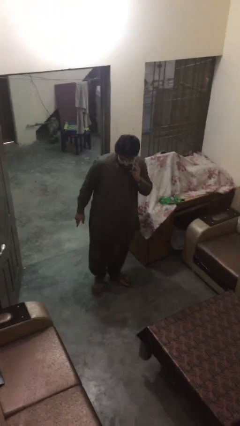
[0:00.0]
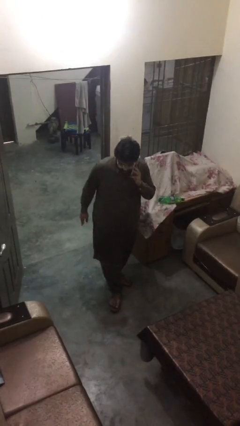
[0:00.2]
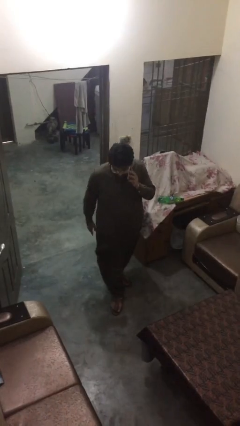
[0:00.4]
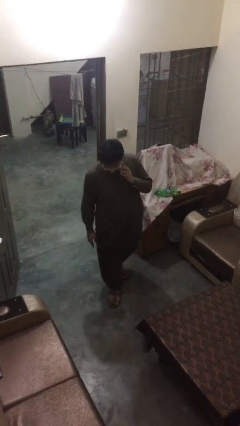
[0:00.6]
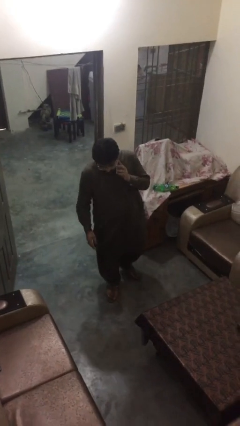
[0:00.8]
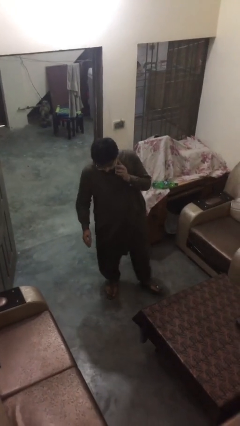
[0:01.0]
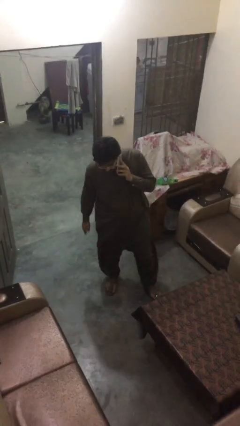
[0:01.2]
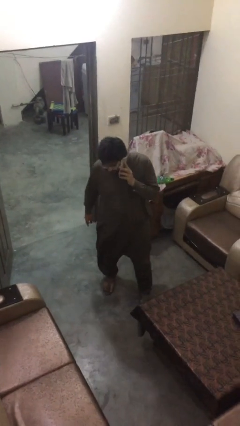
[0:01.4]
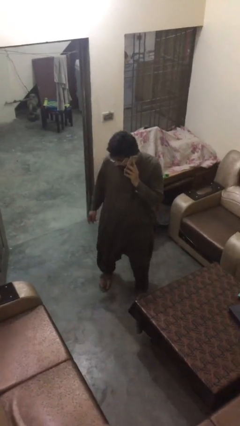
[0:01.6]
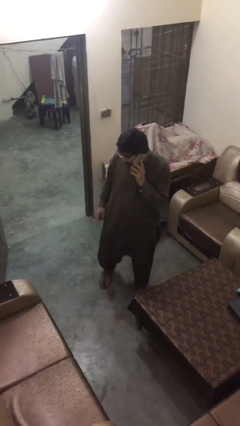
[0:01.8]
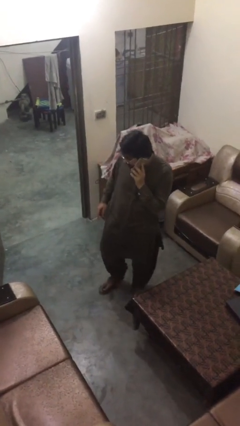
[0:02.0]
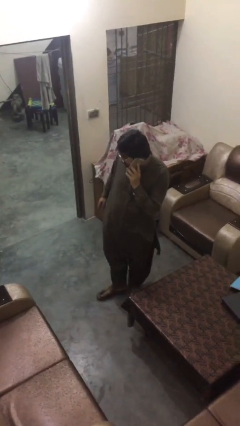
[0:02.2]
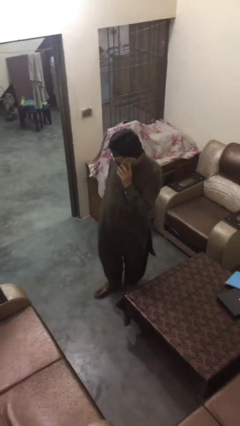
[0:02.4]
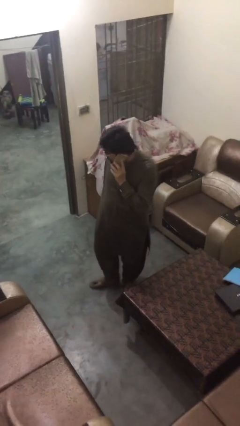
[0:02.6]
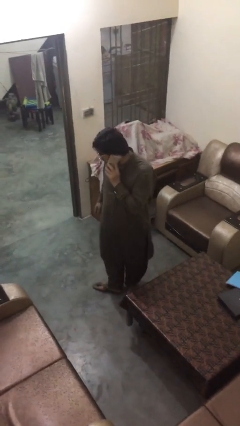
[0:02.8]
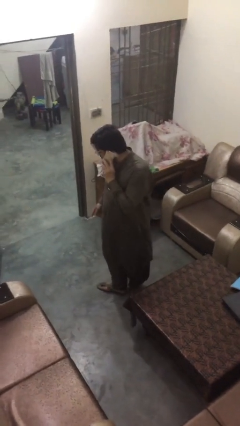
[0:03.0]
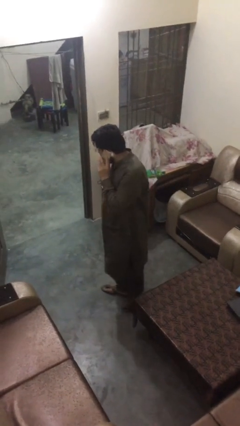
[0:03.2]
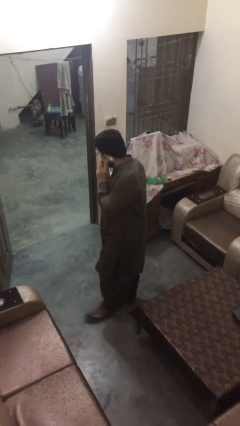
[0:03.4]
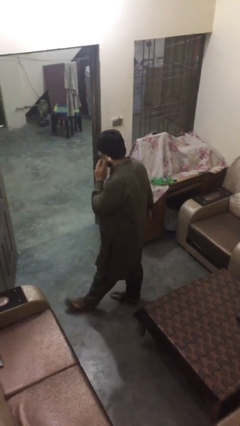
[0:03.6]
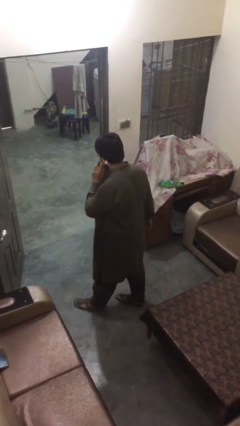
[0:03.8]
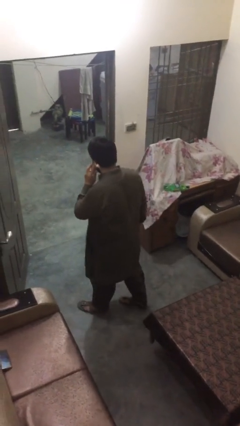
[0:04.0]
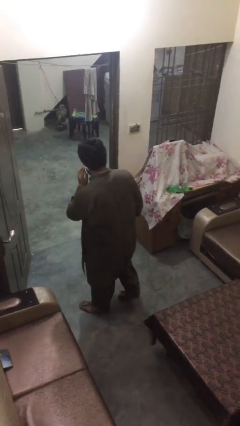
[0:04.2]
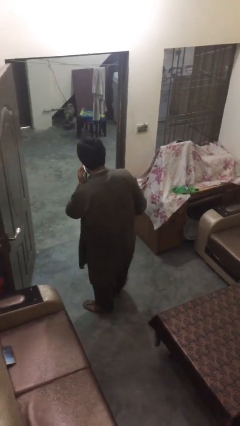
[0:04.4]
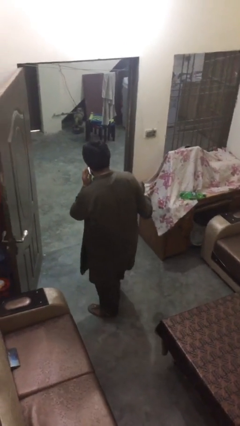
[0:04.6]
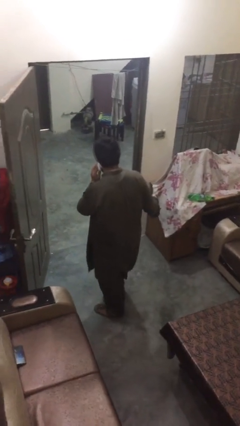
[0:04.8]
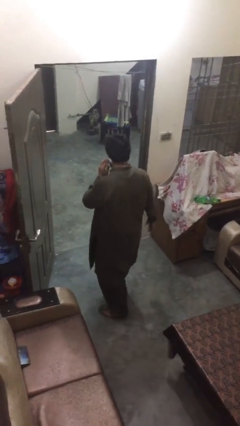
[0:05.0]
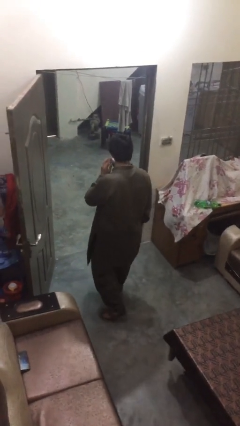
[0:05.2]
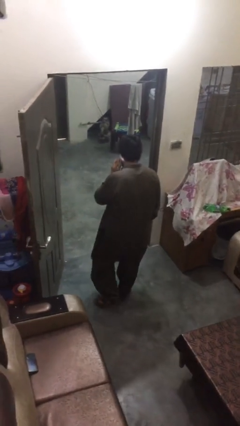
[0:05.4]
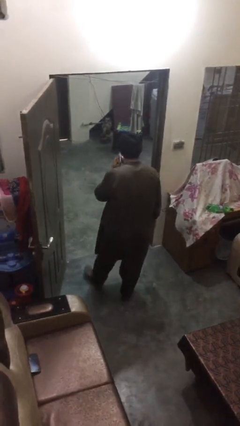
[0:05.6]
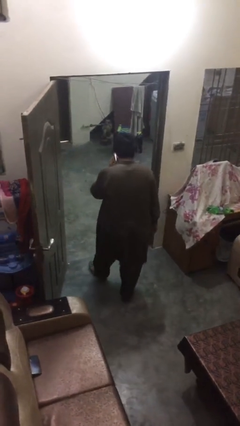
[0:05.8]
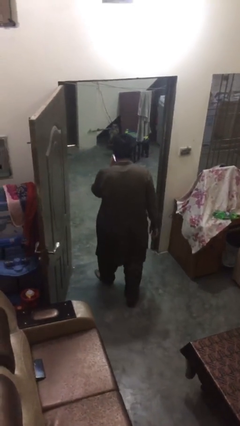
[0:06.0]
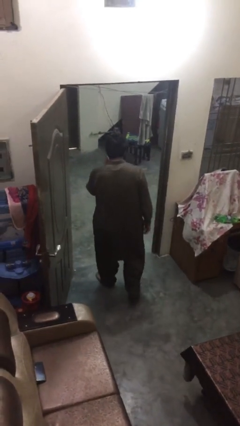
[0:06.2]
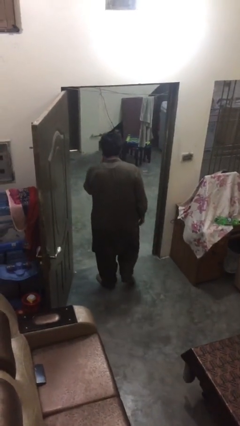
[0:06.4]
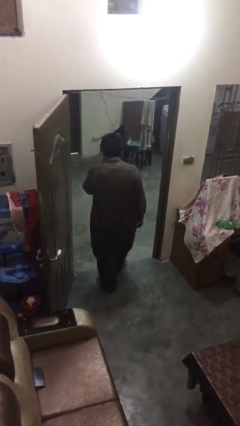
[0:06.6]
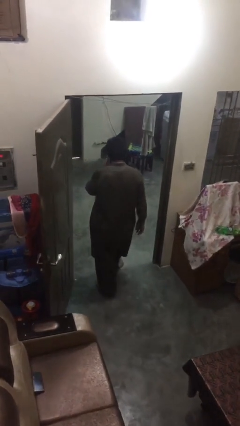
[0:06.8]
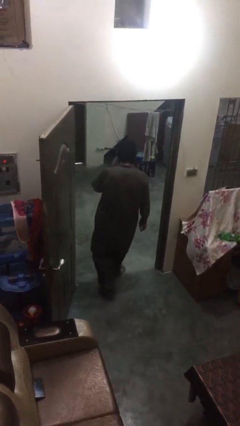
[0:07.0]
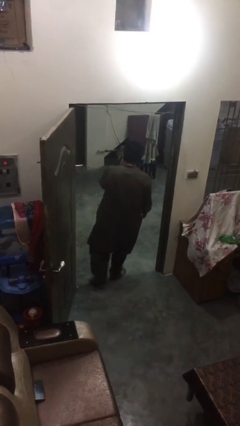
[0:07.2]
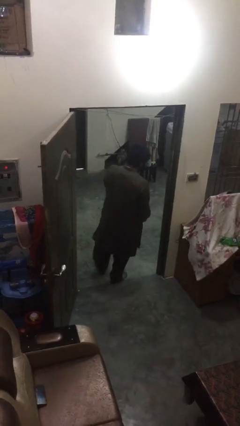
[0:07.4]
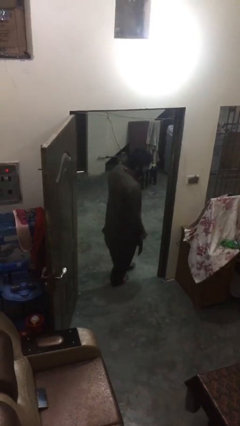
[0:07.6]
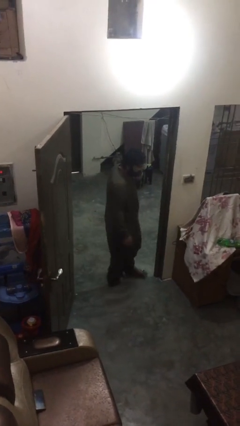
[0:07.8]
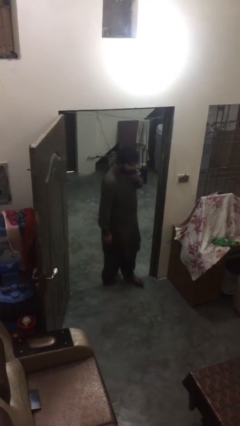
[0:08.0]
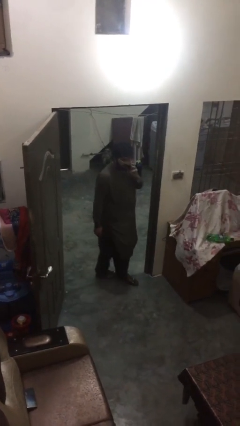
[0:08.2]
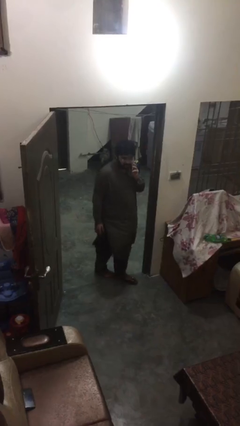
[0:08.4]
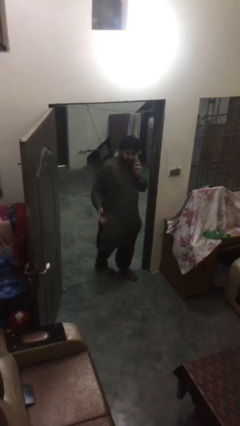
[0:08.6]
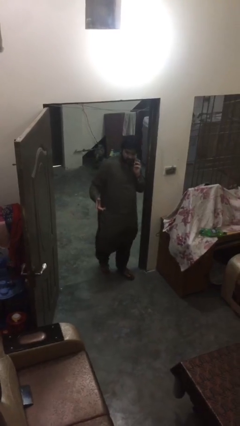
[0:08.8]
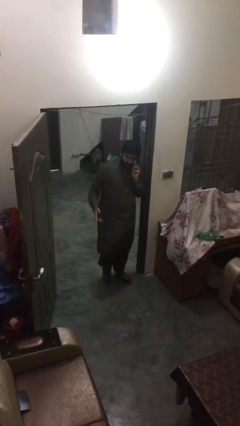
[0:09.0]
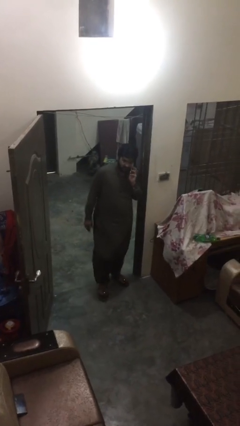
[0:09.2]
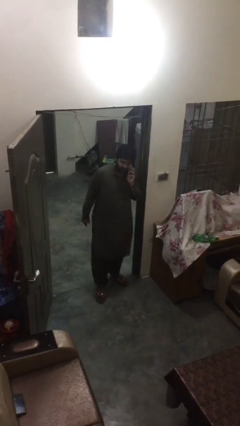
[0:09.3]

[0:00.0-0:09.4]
person talks on phone

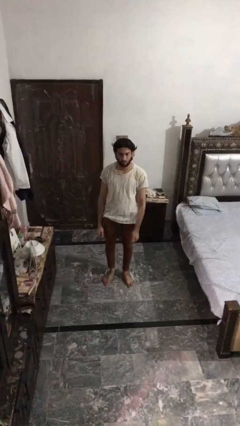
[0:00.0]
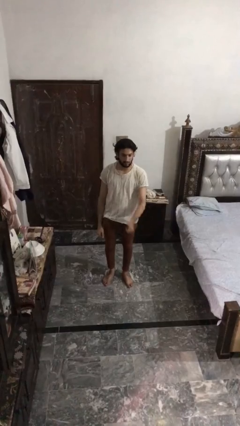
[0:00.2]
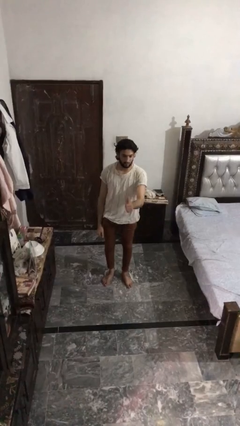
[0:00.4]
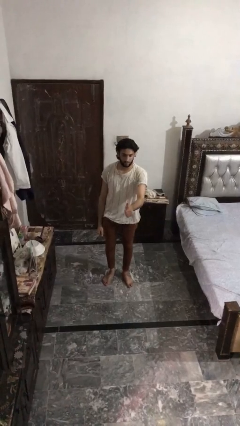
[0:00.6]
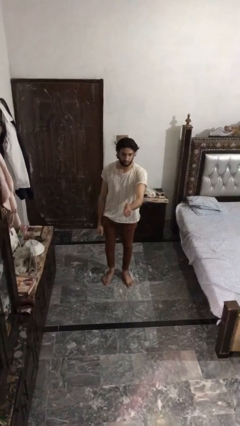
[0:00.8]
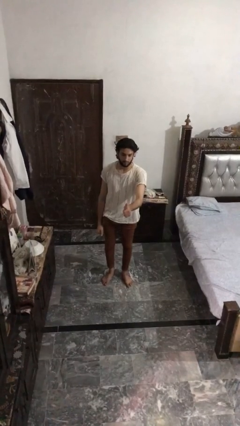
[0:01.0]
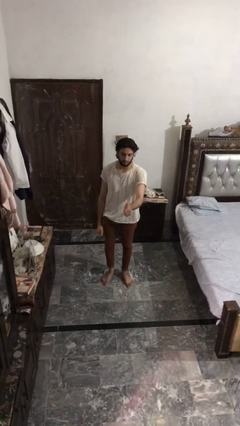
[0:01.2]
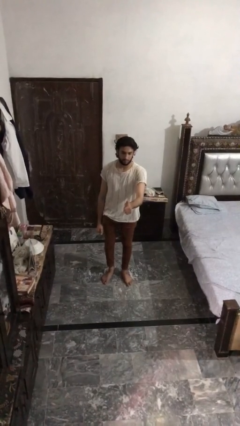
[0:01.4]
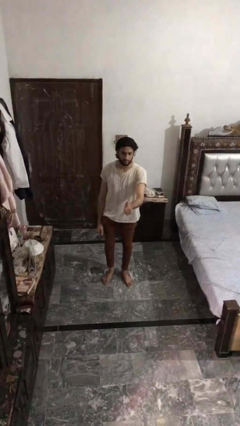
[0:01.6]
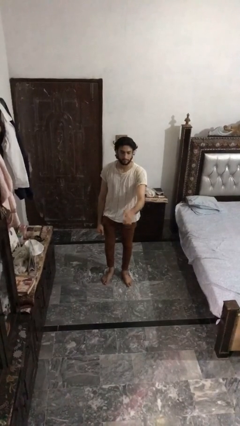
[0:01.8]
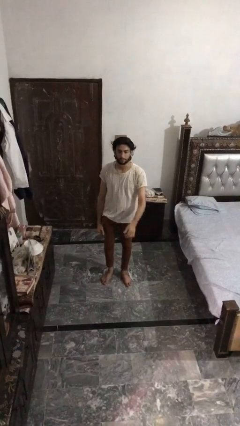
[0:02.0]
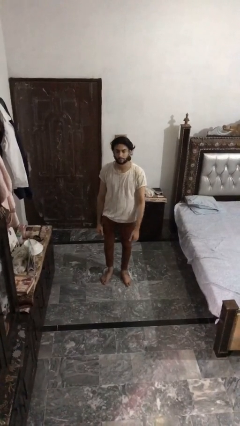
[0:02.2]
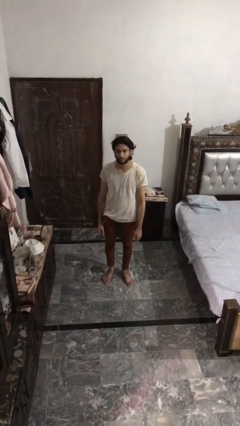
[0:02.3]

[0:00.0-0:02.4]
person gestures thumbs up

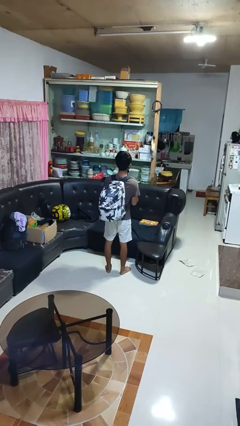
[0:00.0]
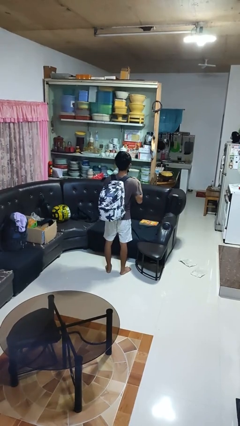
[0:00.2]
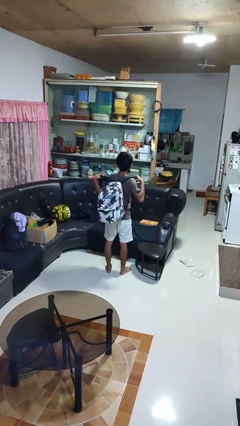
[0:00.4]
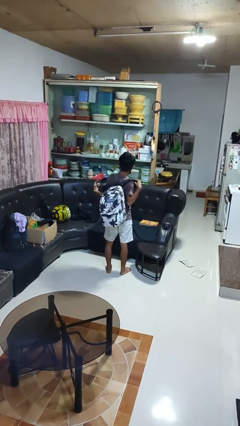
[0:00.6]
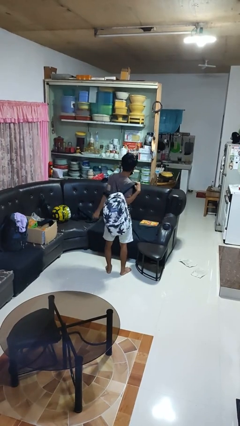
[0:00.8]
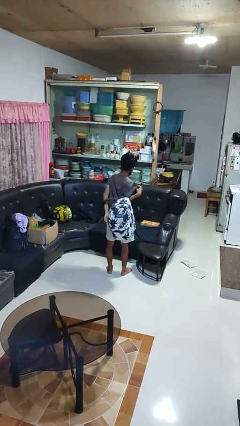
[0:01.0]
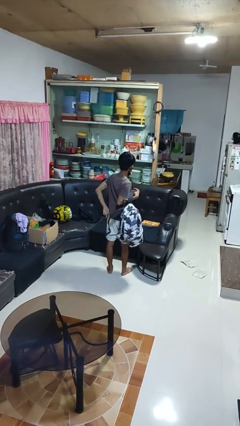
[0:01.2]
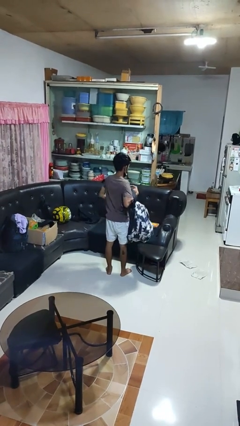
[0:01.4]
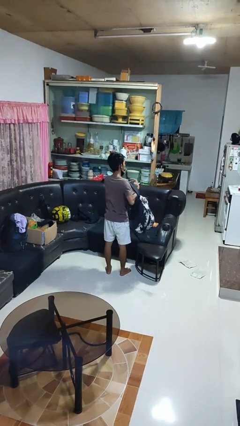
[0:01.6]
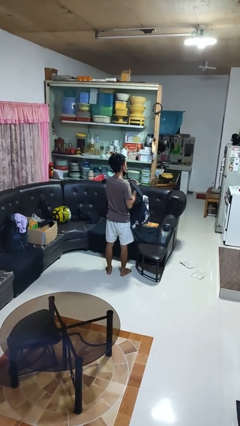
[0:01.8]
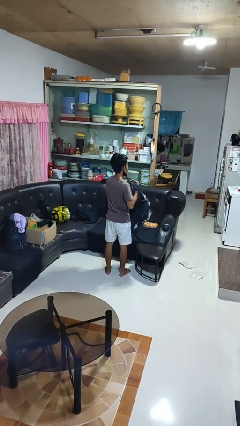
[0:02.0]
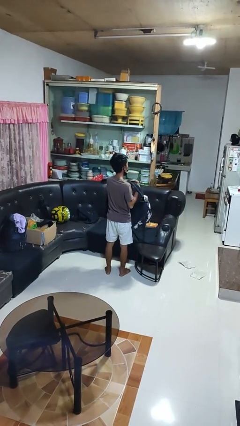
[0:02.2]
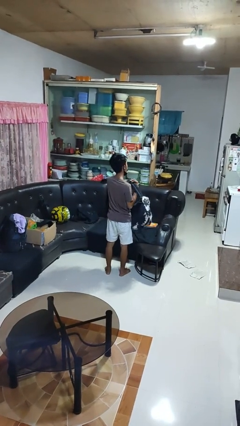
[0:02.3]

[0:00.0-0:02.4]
person takes off backpack

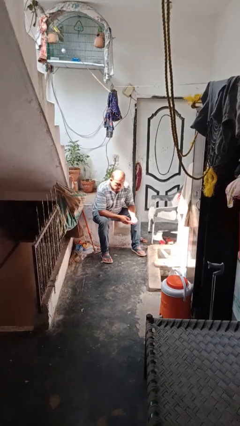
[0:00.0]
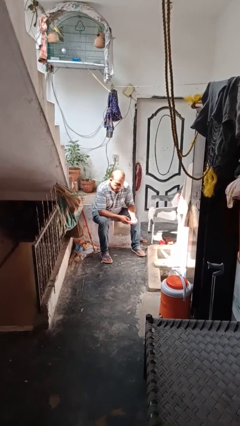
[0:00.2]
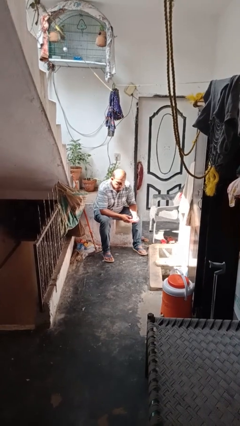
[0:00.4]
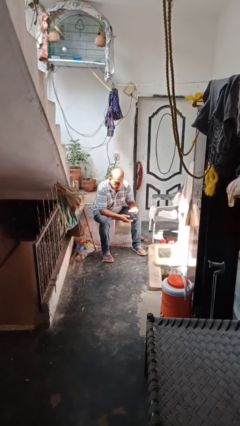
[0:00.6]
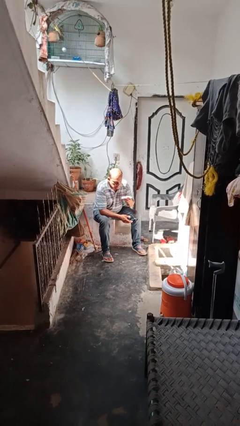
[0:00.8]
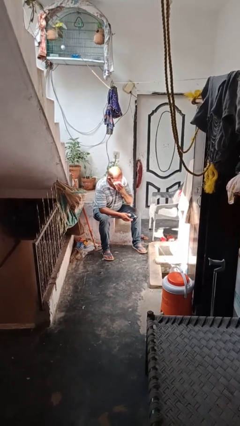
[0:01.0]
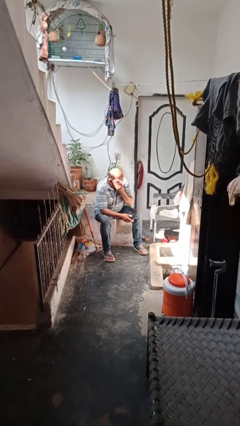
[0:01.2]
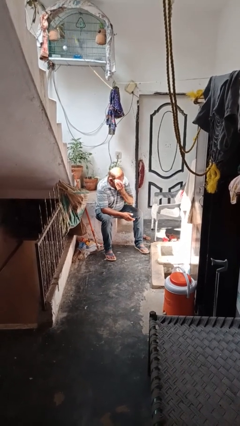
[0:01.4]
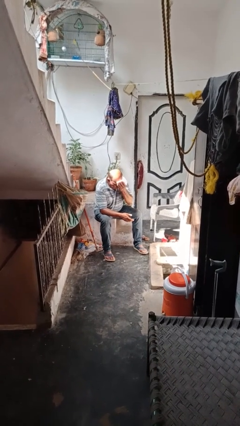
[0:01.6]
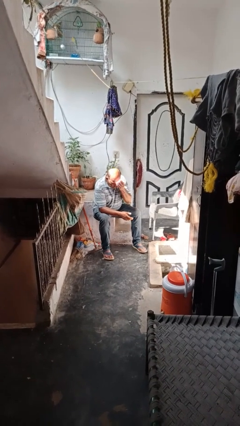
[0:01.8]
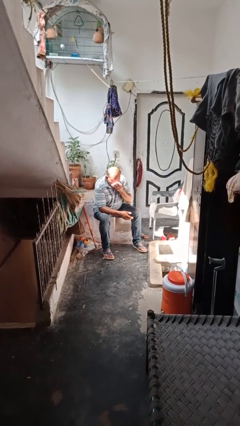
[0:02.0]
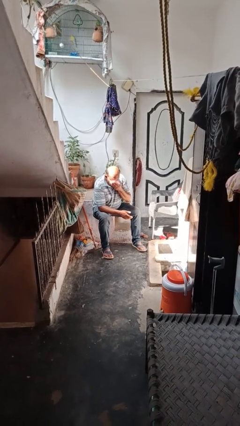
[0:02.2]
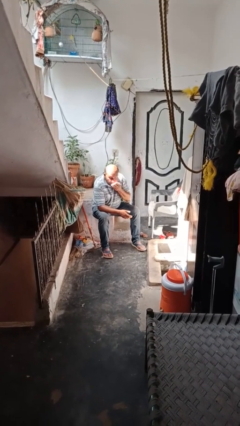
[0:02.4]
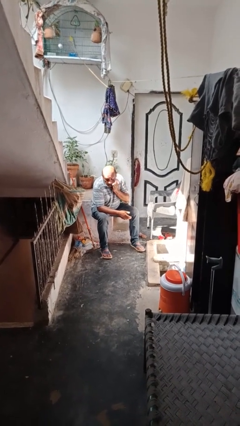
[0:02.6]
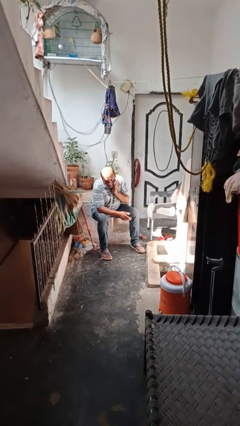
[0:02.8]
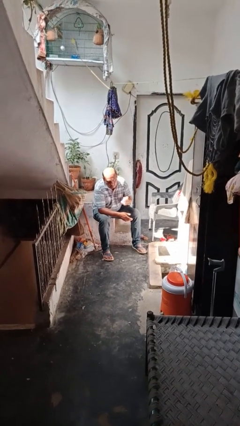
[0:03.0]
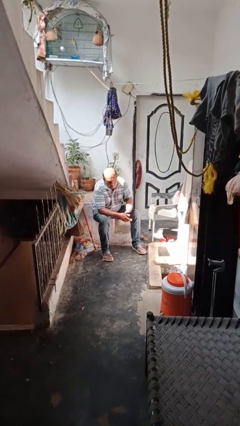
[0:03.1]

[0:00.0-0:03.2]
person wipes mouth with napkin

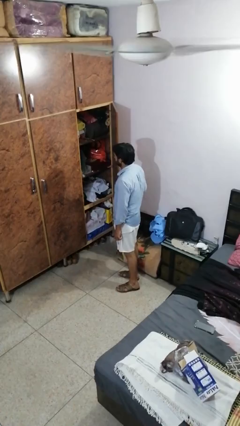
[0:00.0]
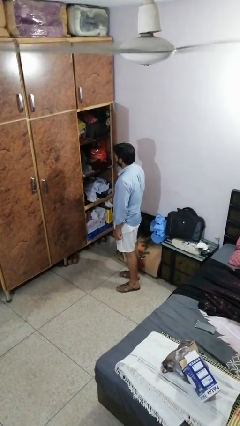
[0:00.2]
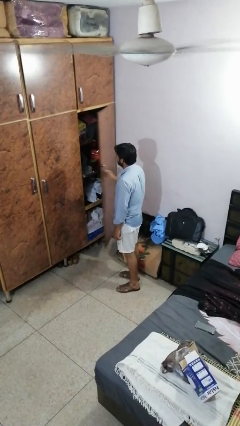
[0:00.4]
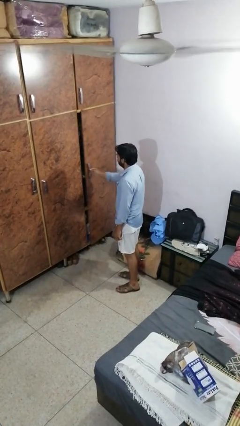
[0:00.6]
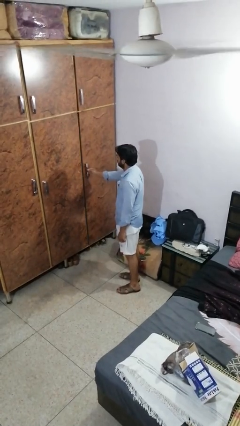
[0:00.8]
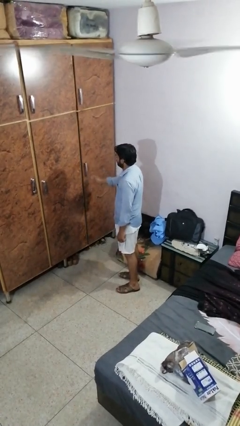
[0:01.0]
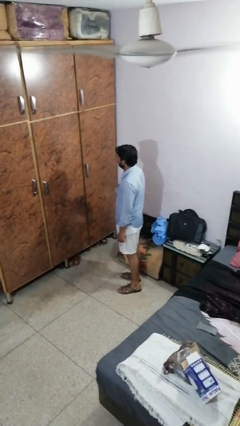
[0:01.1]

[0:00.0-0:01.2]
person closes closet door
